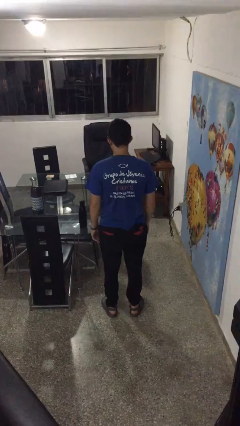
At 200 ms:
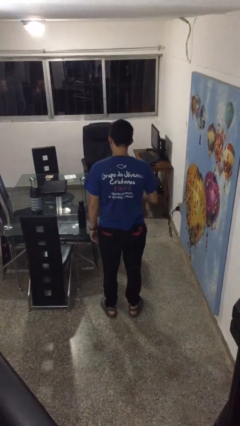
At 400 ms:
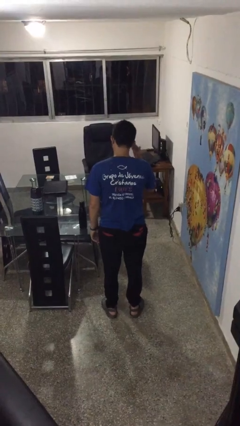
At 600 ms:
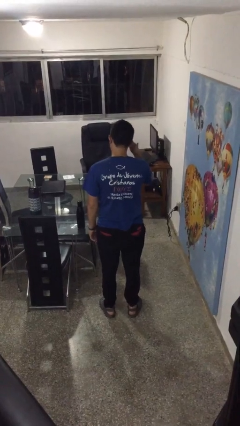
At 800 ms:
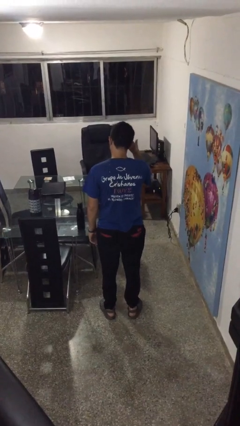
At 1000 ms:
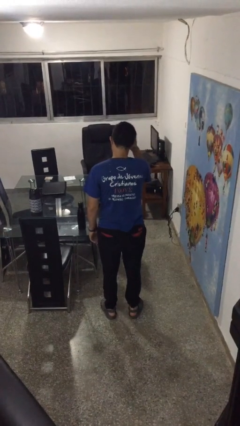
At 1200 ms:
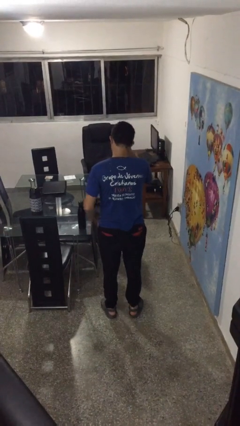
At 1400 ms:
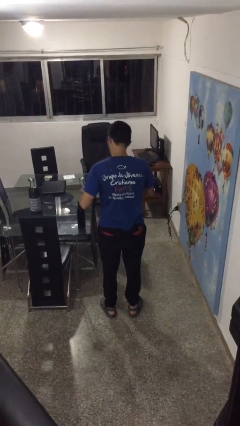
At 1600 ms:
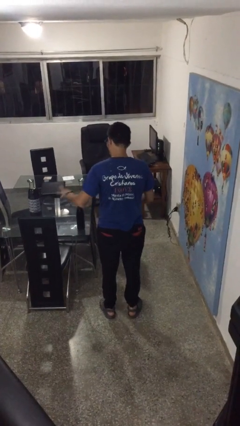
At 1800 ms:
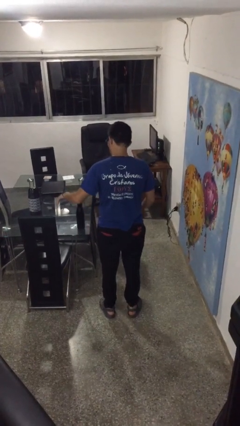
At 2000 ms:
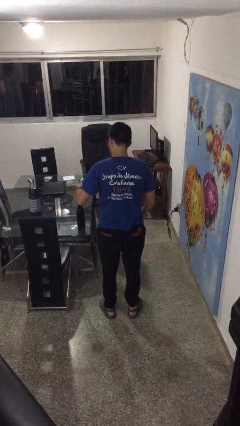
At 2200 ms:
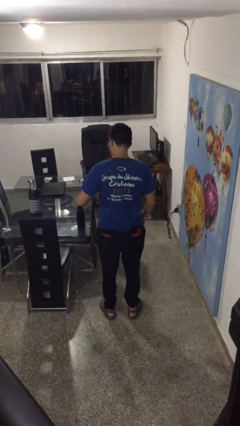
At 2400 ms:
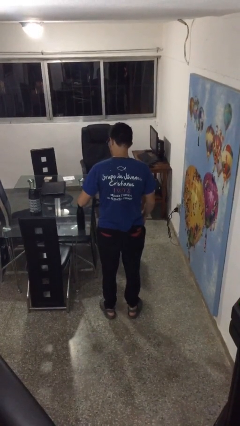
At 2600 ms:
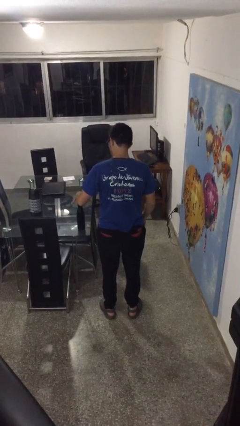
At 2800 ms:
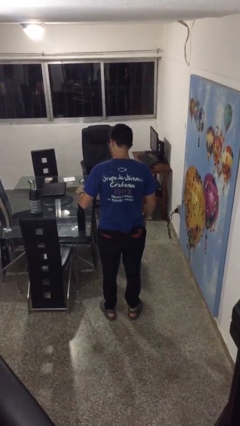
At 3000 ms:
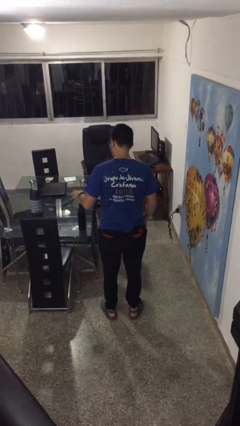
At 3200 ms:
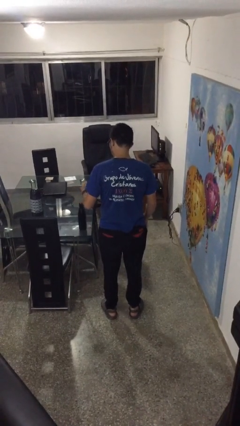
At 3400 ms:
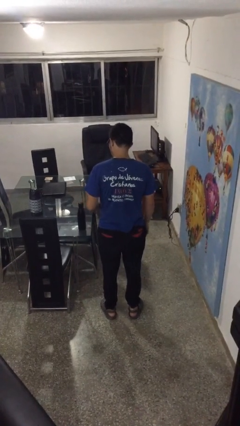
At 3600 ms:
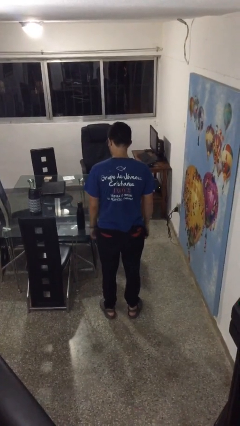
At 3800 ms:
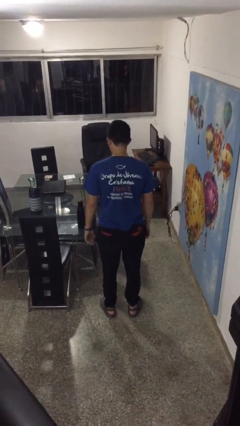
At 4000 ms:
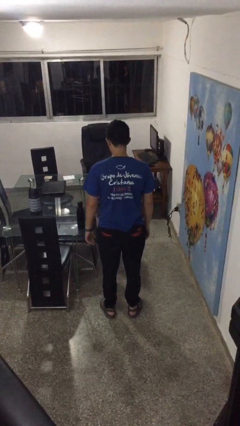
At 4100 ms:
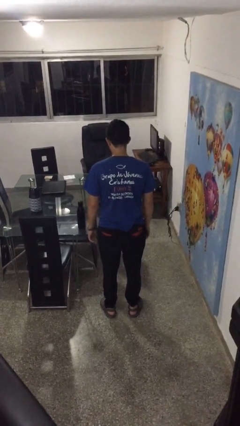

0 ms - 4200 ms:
person waves hand over object

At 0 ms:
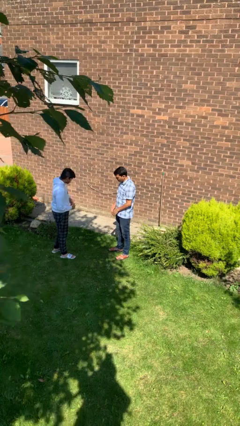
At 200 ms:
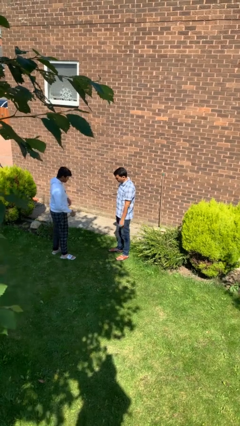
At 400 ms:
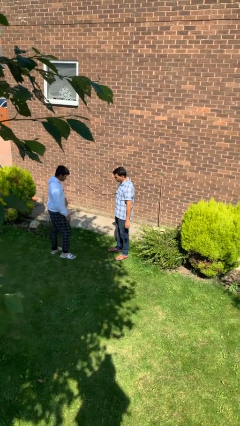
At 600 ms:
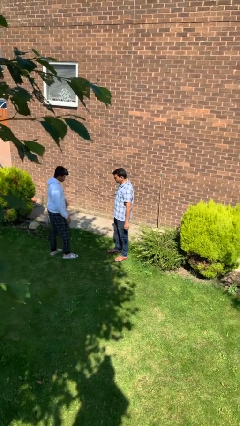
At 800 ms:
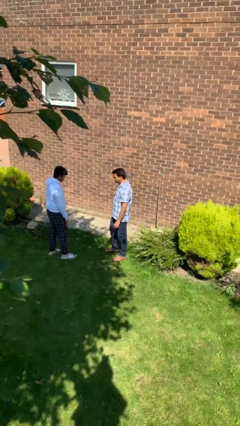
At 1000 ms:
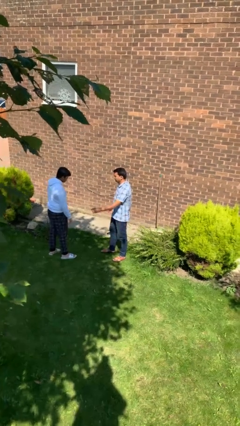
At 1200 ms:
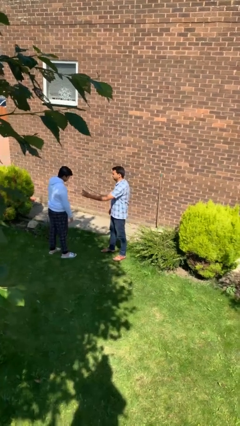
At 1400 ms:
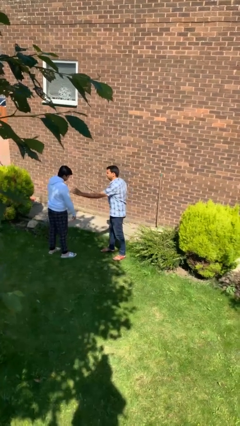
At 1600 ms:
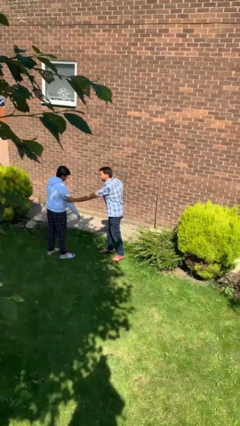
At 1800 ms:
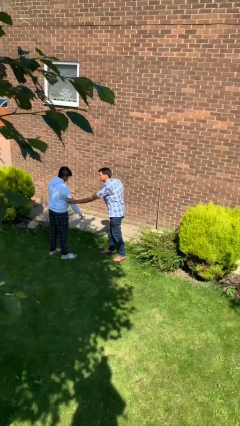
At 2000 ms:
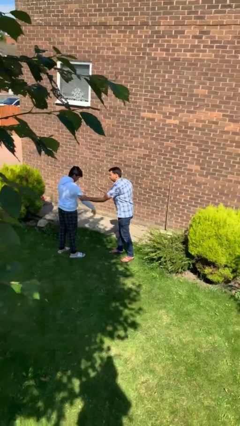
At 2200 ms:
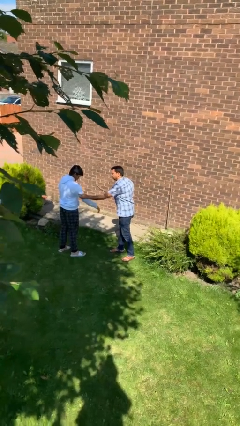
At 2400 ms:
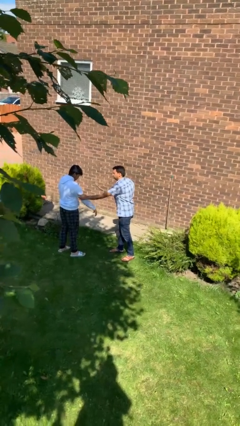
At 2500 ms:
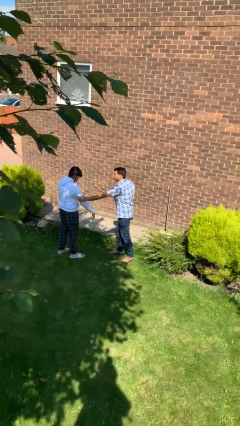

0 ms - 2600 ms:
person grabs person by bicep

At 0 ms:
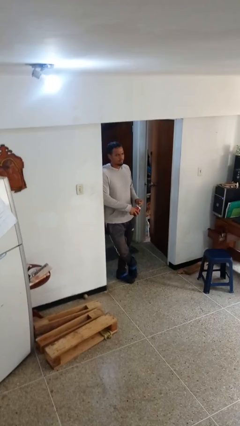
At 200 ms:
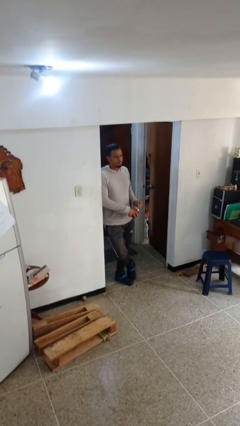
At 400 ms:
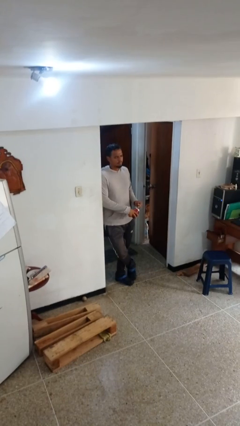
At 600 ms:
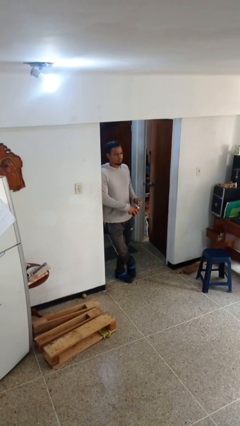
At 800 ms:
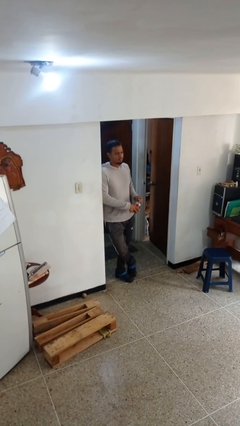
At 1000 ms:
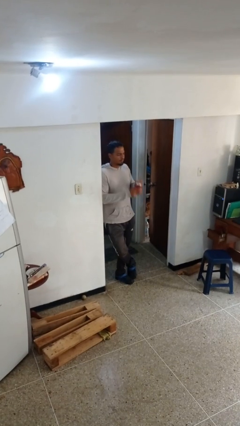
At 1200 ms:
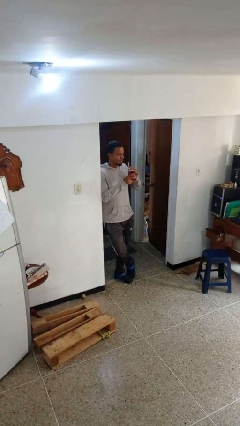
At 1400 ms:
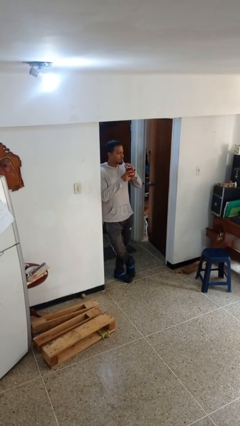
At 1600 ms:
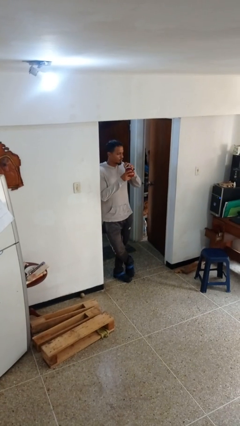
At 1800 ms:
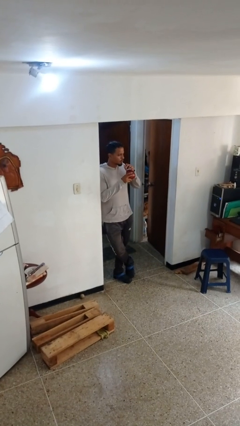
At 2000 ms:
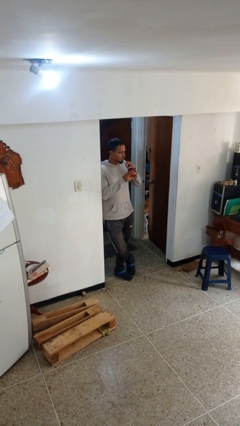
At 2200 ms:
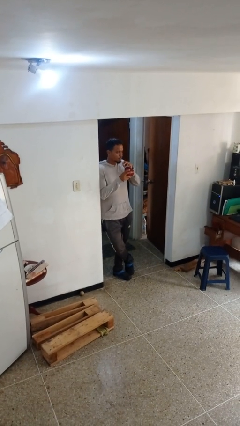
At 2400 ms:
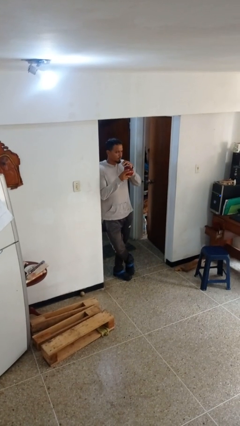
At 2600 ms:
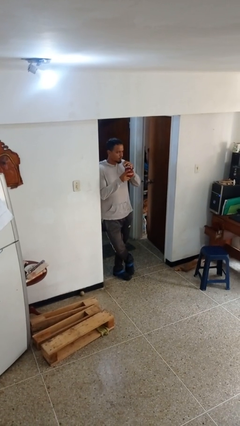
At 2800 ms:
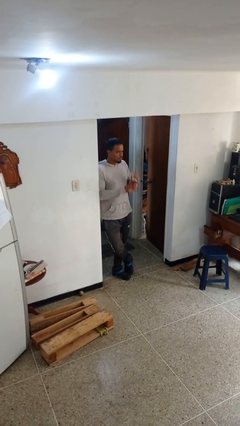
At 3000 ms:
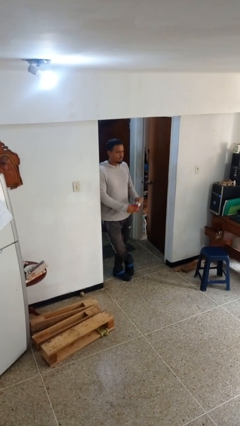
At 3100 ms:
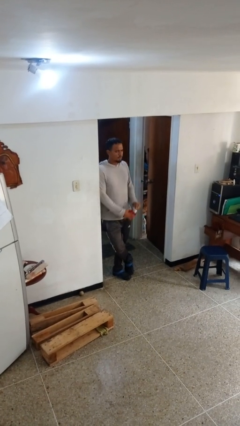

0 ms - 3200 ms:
person drinks from straw

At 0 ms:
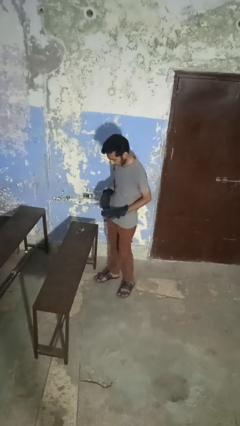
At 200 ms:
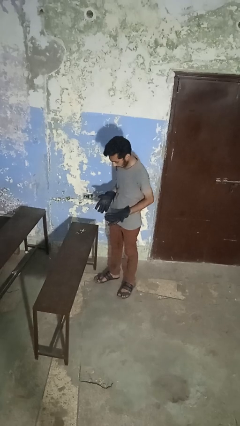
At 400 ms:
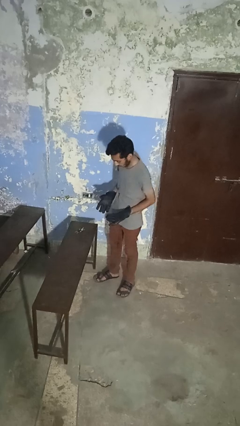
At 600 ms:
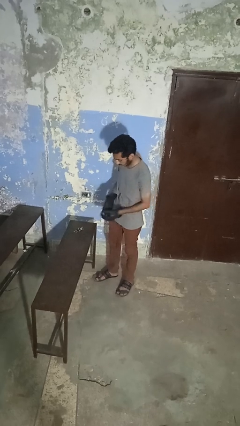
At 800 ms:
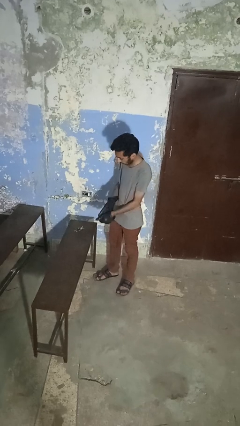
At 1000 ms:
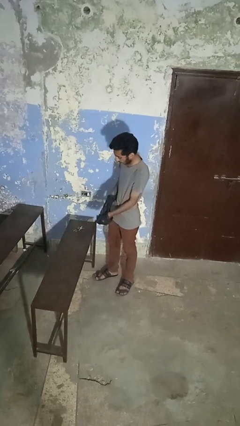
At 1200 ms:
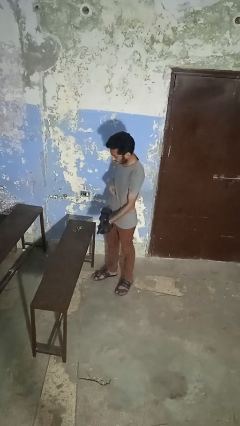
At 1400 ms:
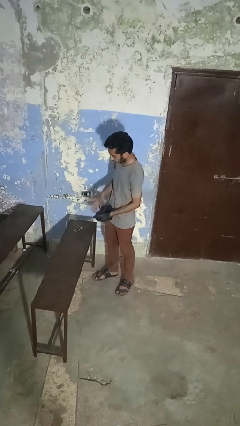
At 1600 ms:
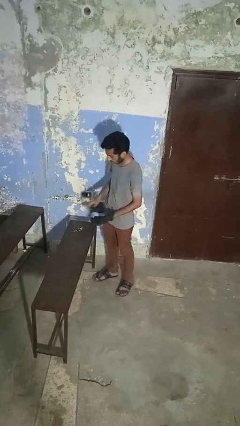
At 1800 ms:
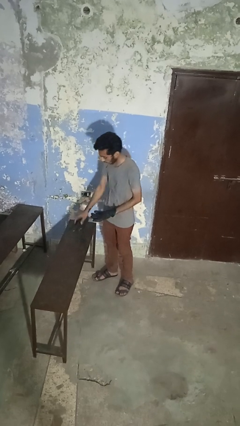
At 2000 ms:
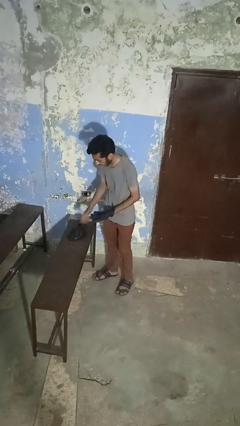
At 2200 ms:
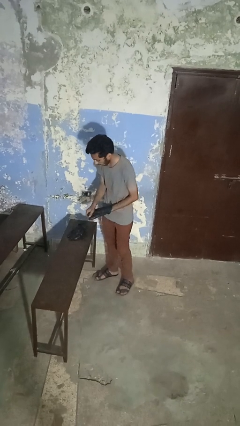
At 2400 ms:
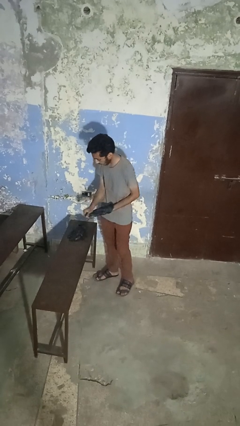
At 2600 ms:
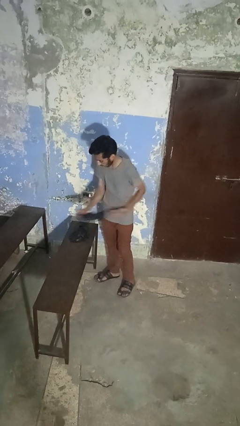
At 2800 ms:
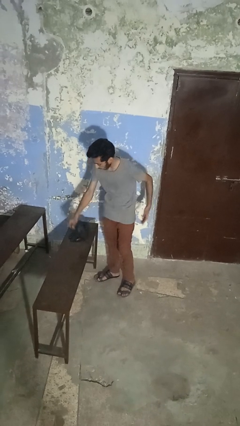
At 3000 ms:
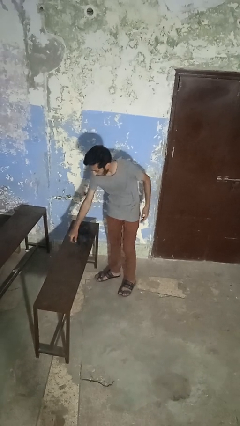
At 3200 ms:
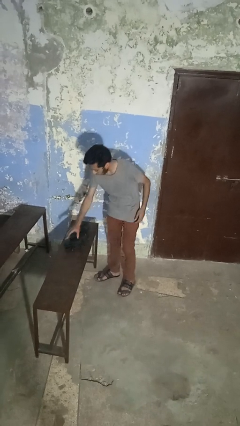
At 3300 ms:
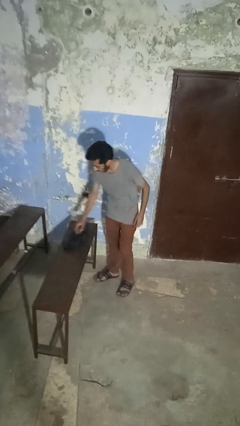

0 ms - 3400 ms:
person takes off gloves

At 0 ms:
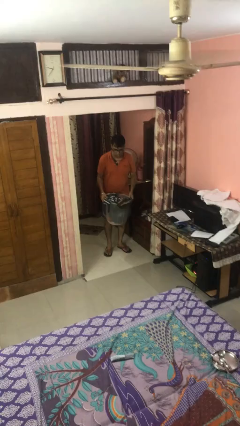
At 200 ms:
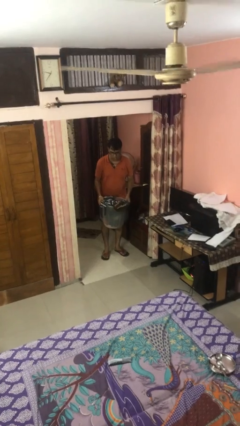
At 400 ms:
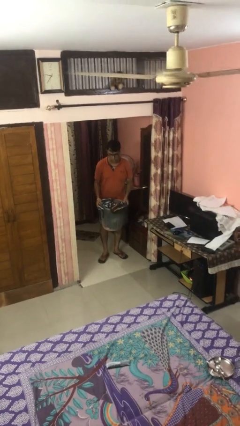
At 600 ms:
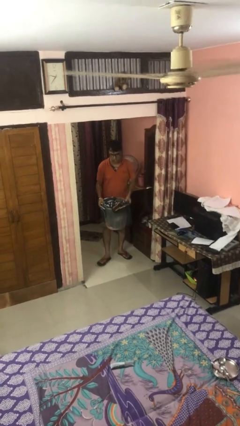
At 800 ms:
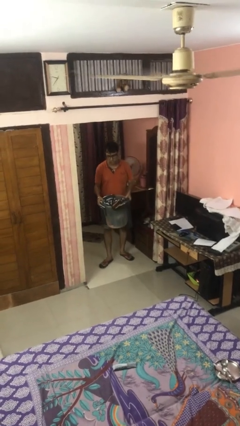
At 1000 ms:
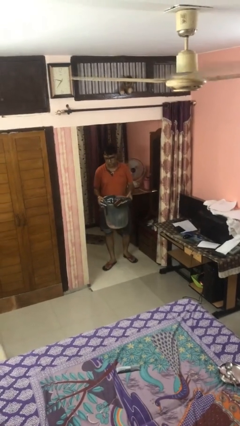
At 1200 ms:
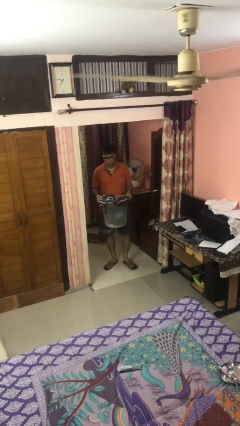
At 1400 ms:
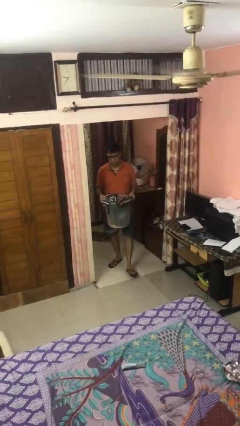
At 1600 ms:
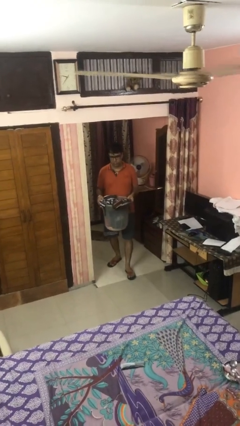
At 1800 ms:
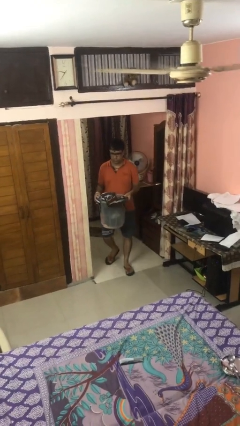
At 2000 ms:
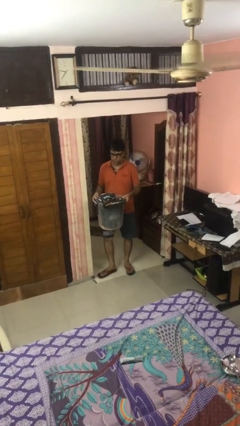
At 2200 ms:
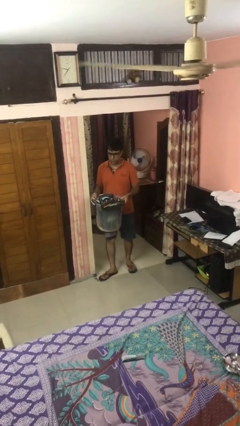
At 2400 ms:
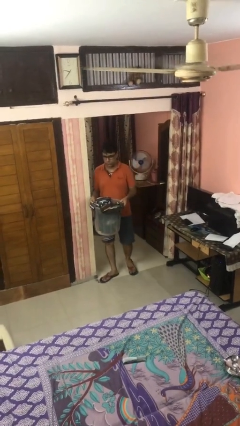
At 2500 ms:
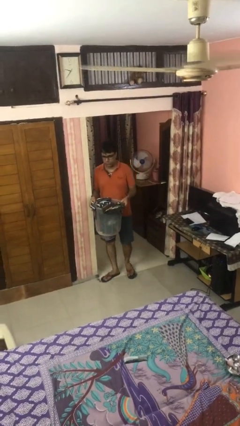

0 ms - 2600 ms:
person carries laundry basket

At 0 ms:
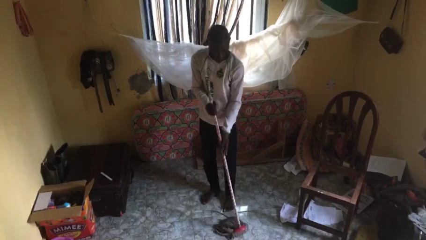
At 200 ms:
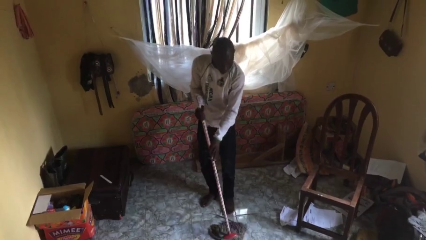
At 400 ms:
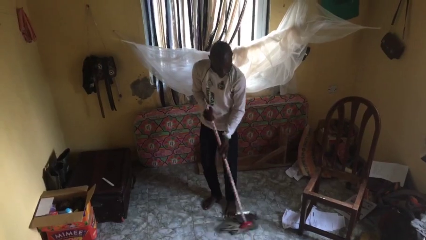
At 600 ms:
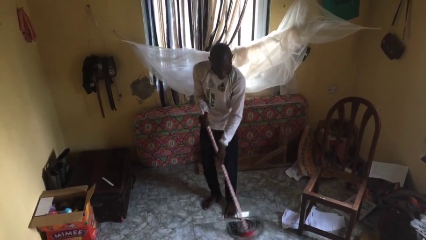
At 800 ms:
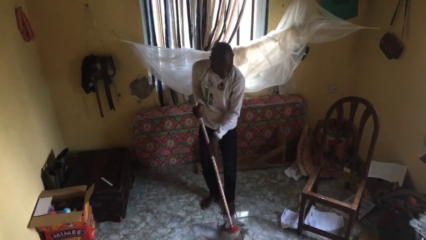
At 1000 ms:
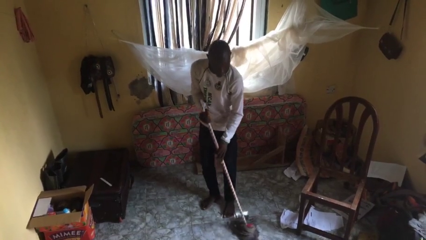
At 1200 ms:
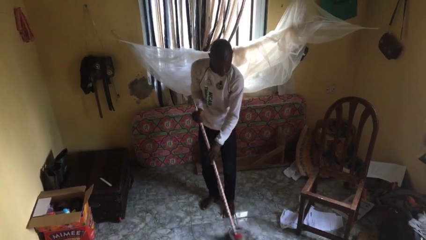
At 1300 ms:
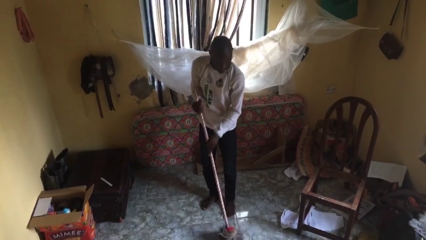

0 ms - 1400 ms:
person mops
